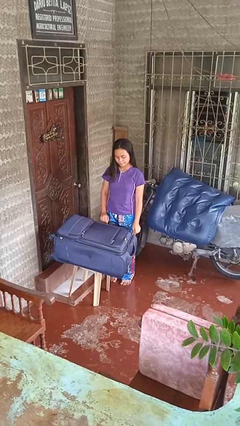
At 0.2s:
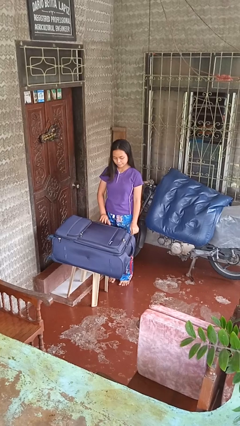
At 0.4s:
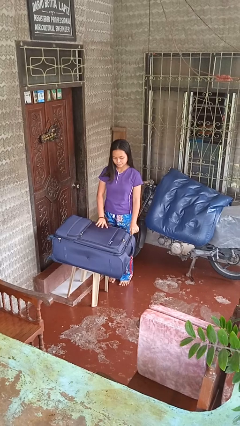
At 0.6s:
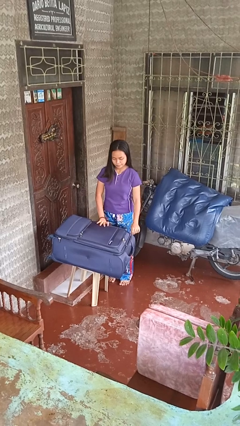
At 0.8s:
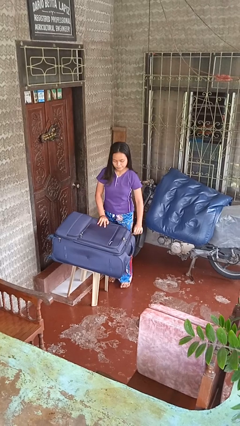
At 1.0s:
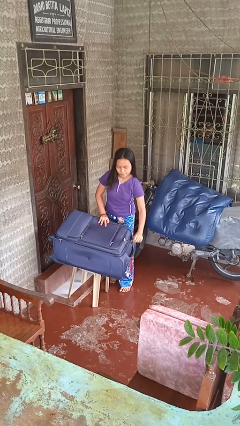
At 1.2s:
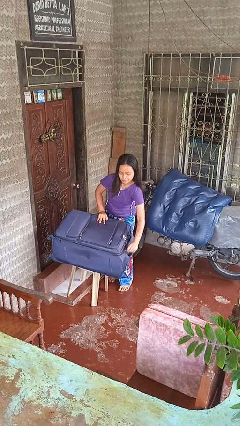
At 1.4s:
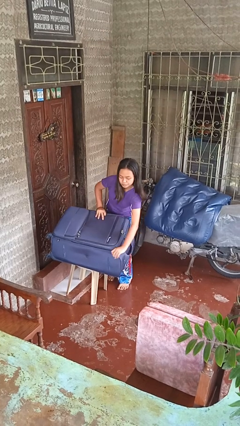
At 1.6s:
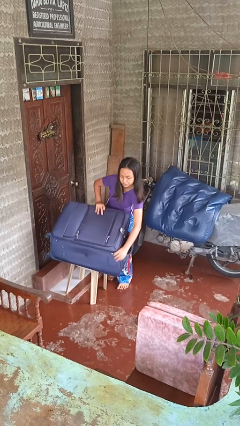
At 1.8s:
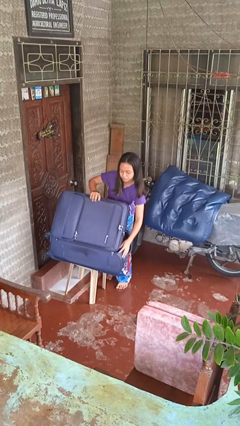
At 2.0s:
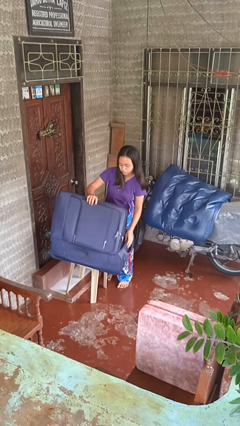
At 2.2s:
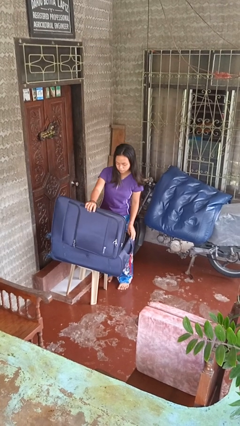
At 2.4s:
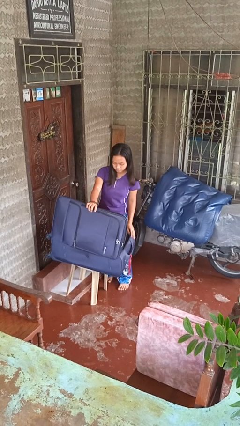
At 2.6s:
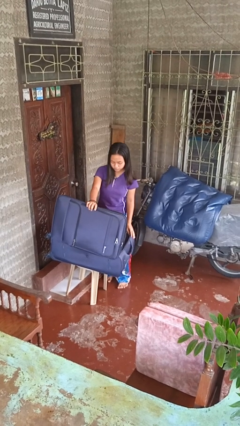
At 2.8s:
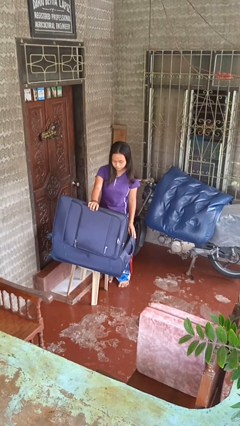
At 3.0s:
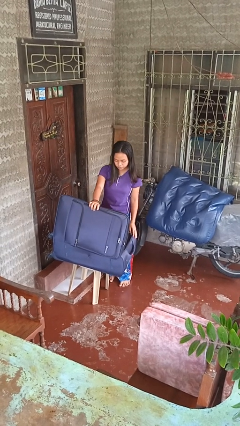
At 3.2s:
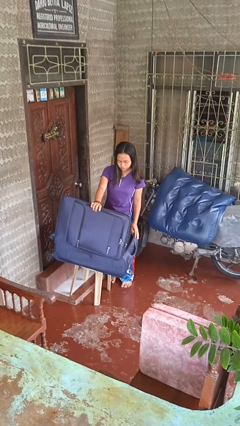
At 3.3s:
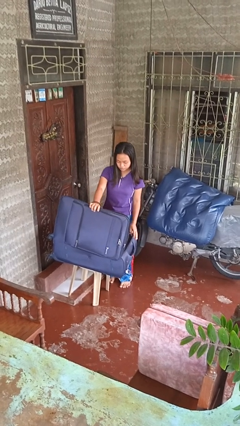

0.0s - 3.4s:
person opens suitcase

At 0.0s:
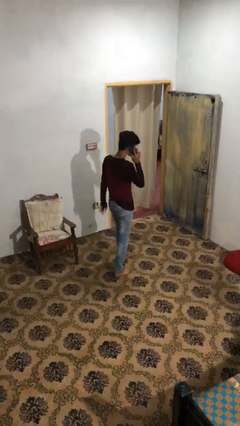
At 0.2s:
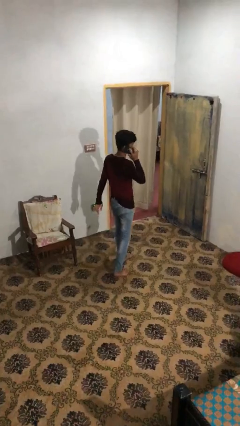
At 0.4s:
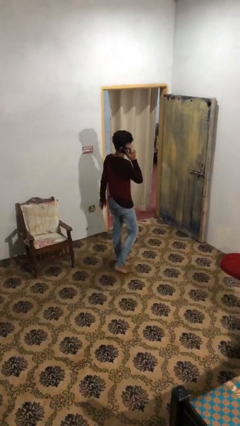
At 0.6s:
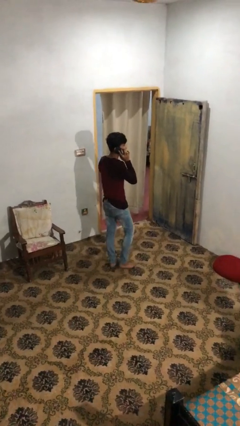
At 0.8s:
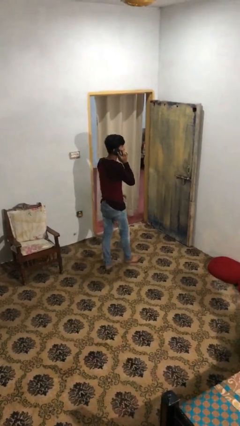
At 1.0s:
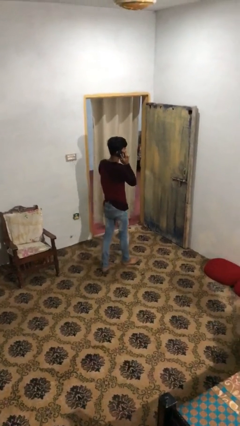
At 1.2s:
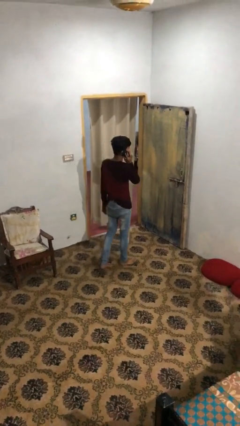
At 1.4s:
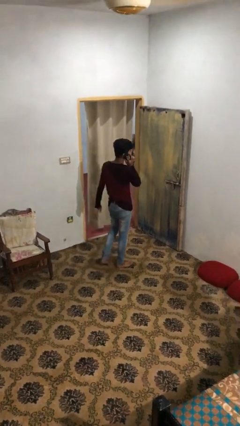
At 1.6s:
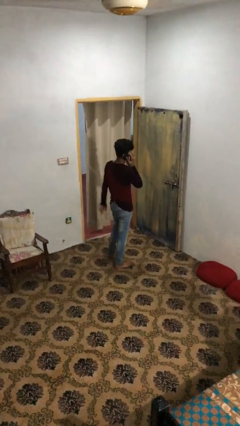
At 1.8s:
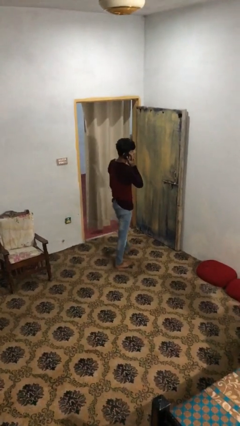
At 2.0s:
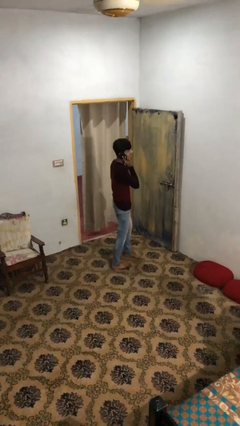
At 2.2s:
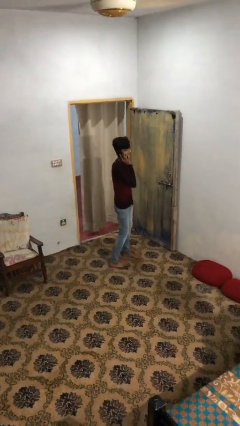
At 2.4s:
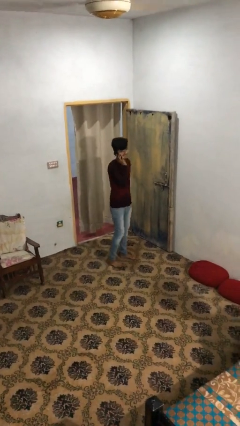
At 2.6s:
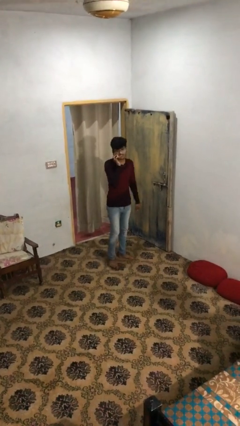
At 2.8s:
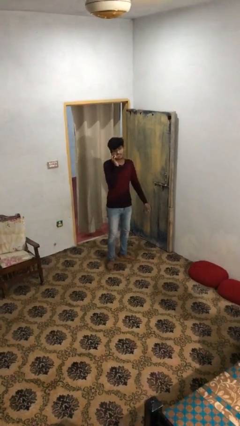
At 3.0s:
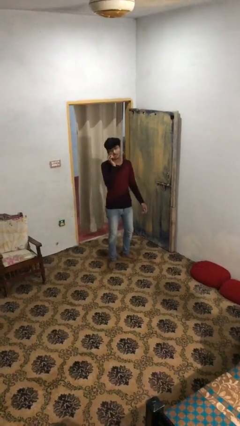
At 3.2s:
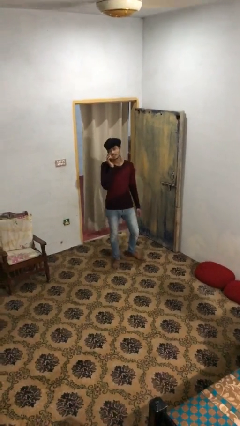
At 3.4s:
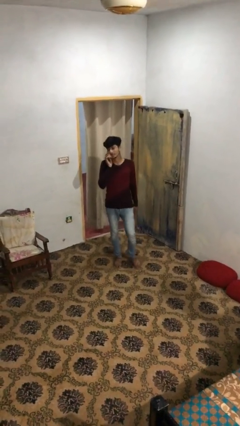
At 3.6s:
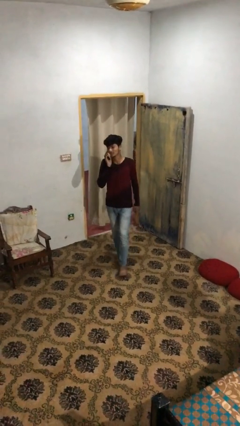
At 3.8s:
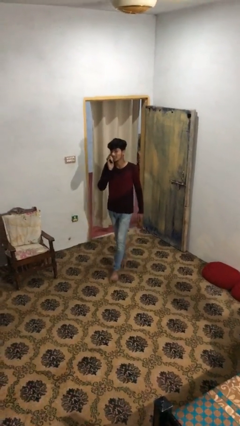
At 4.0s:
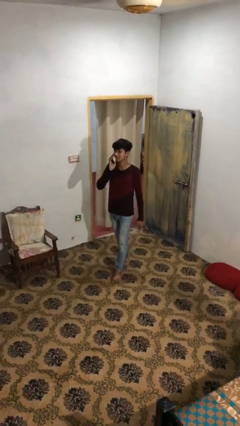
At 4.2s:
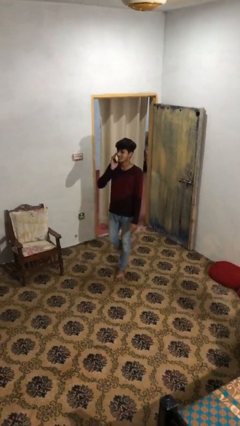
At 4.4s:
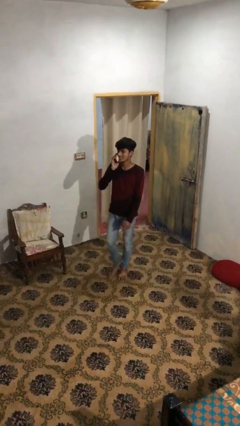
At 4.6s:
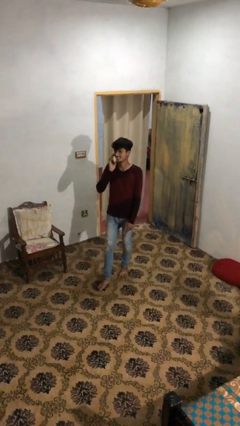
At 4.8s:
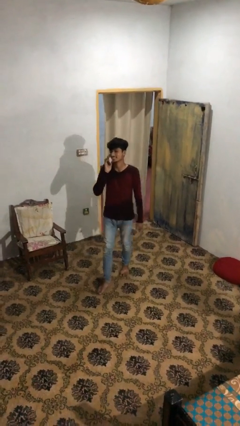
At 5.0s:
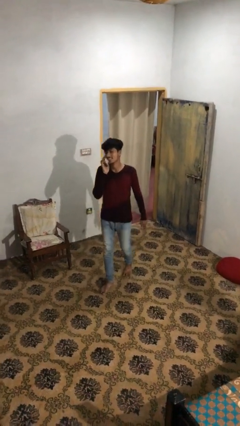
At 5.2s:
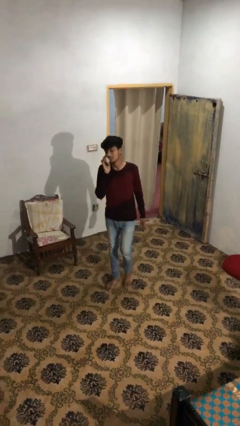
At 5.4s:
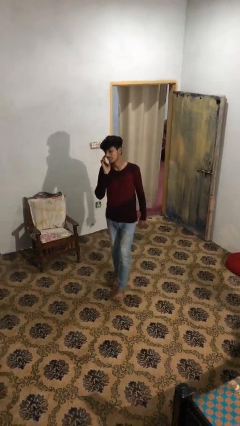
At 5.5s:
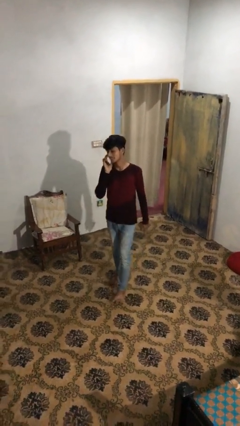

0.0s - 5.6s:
person talks on phone

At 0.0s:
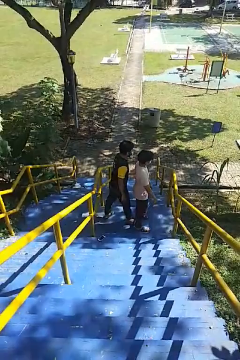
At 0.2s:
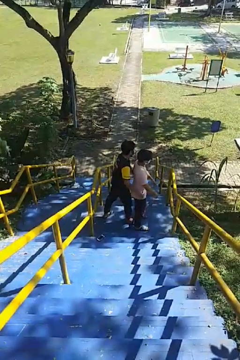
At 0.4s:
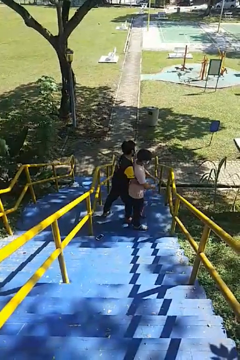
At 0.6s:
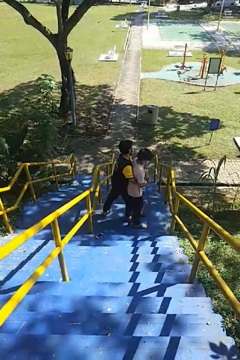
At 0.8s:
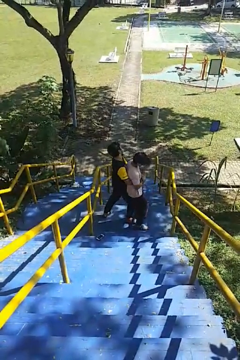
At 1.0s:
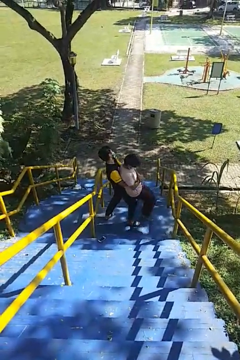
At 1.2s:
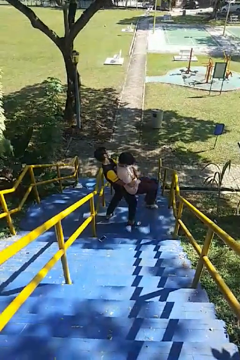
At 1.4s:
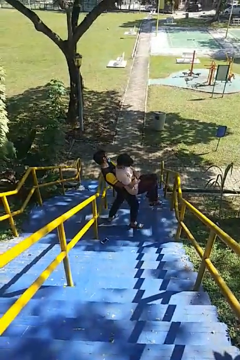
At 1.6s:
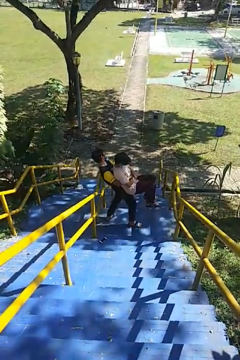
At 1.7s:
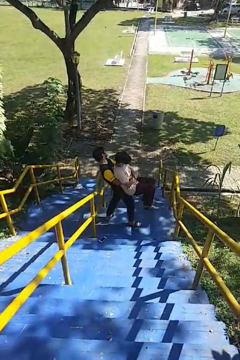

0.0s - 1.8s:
person picks up person

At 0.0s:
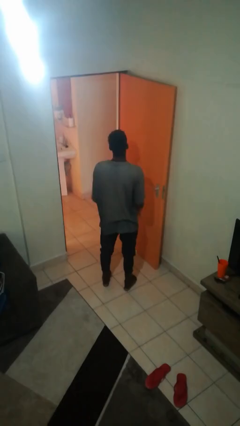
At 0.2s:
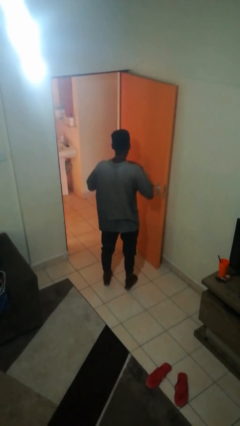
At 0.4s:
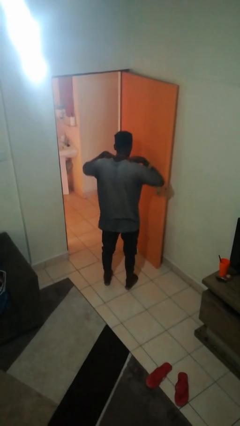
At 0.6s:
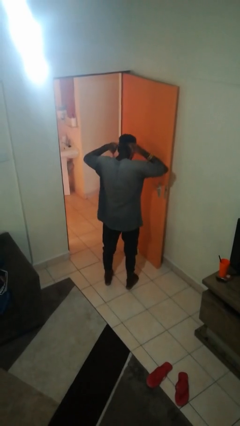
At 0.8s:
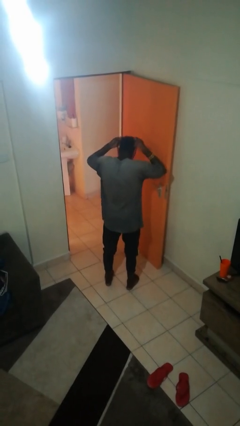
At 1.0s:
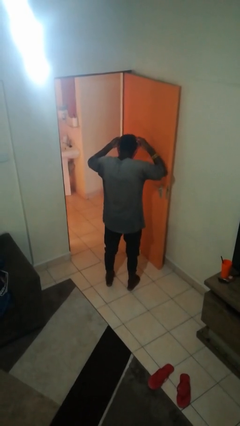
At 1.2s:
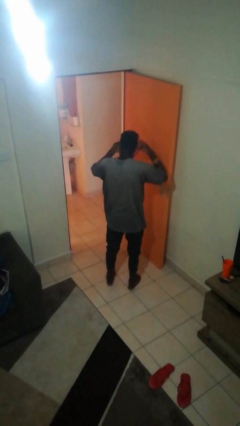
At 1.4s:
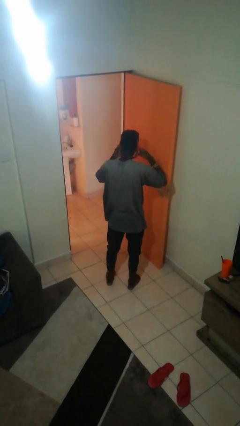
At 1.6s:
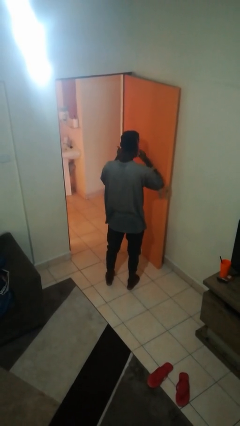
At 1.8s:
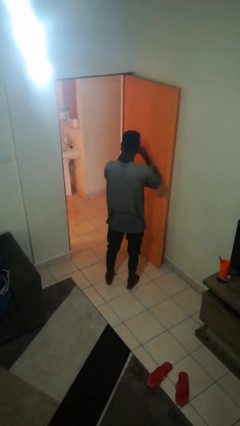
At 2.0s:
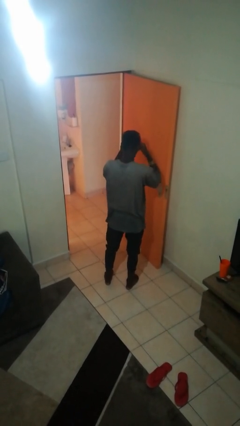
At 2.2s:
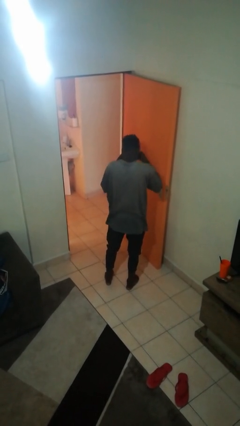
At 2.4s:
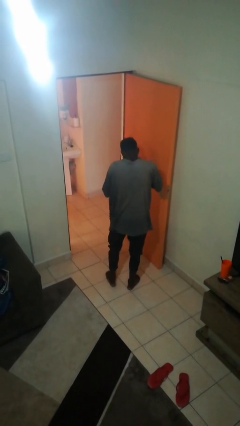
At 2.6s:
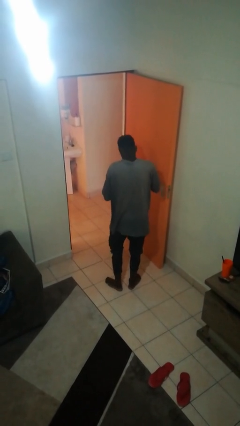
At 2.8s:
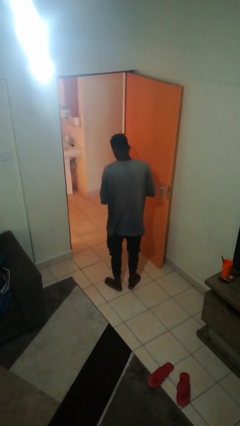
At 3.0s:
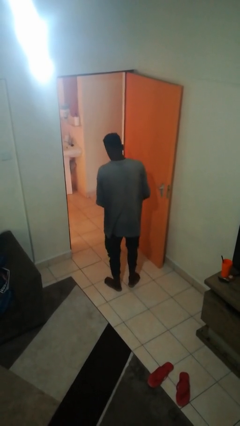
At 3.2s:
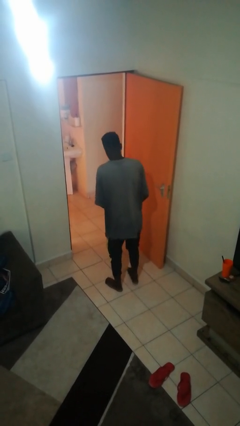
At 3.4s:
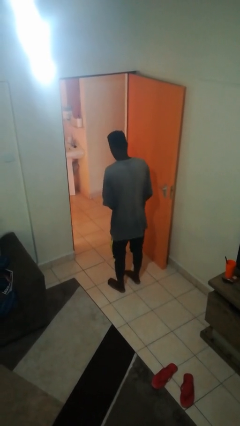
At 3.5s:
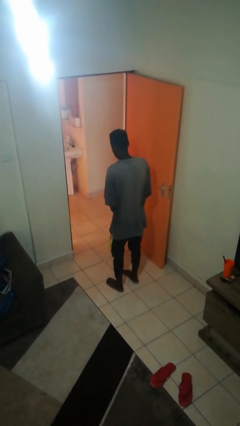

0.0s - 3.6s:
person takes off necklace

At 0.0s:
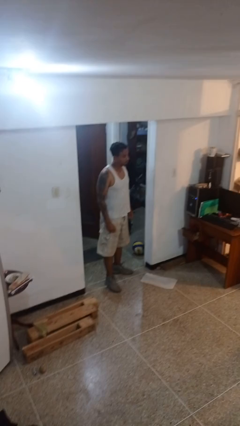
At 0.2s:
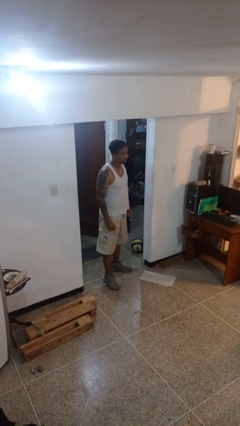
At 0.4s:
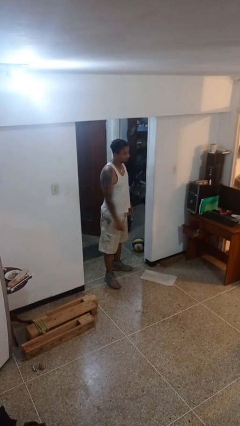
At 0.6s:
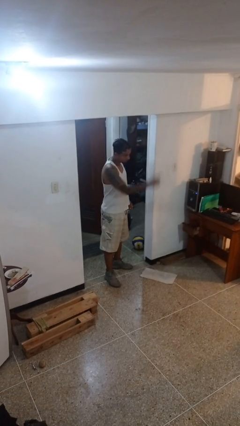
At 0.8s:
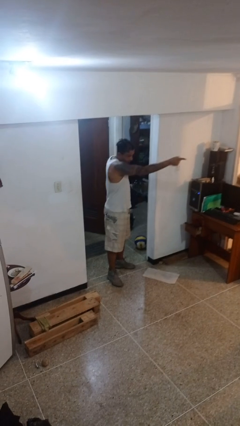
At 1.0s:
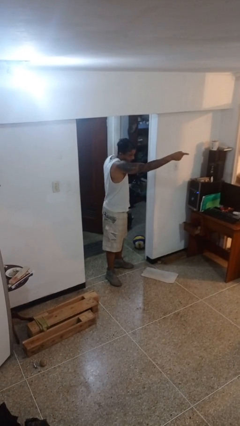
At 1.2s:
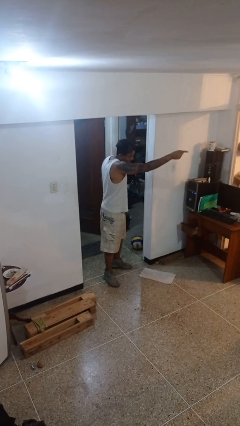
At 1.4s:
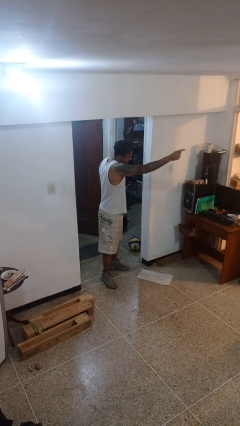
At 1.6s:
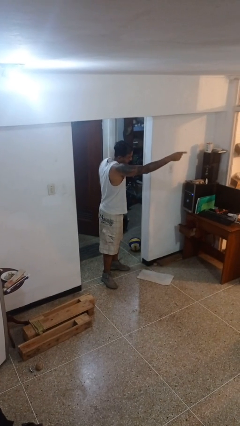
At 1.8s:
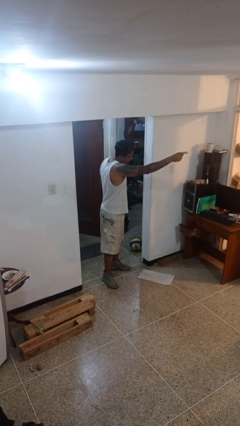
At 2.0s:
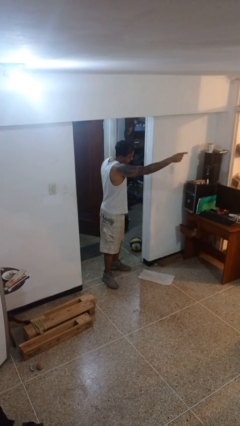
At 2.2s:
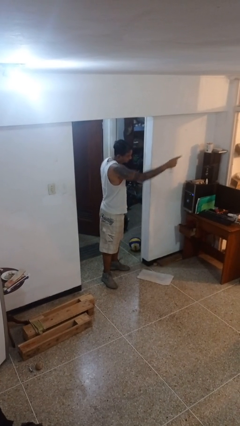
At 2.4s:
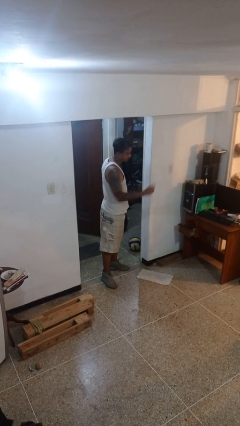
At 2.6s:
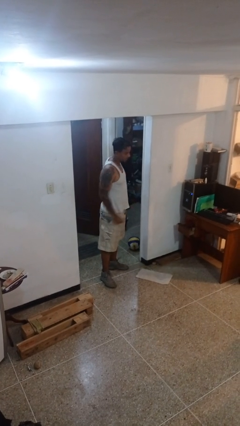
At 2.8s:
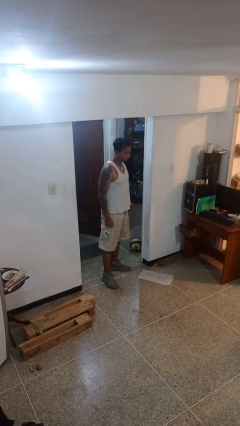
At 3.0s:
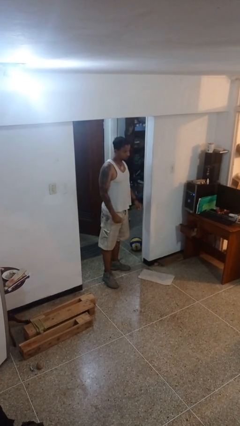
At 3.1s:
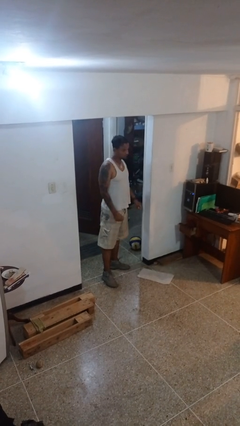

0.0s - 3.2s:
person points at person

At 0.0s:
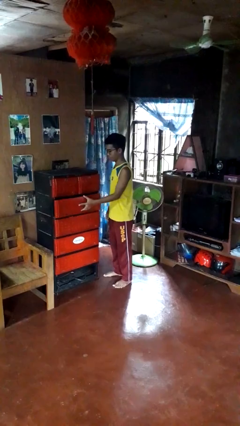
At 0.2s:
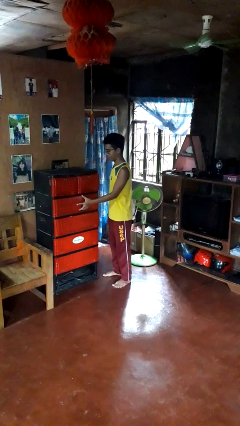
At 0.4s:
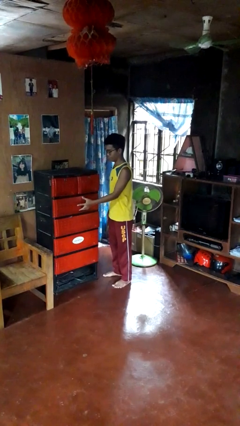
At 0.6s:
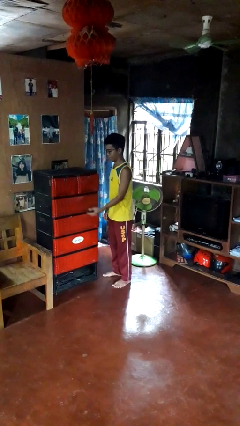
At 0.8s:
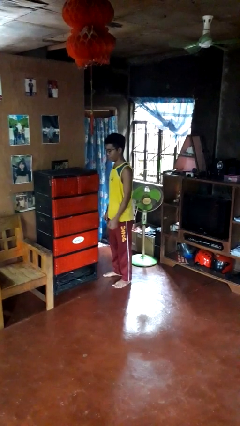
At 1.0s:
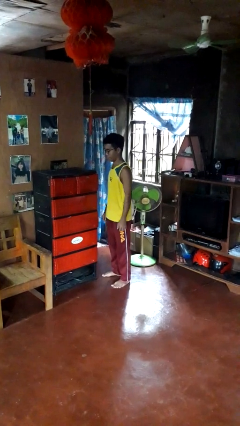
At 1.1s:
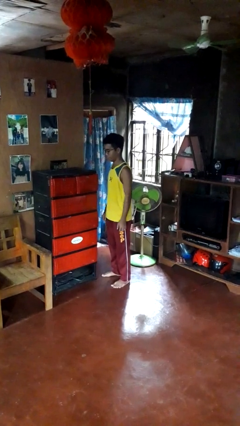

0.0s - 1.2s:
person closes dresser drawer
